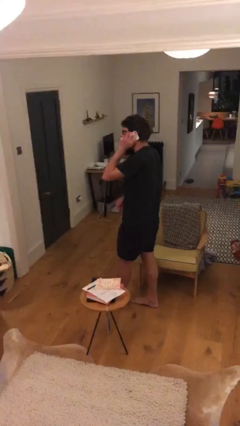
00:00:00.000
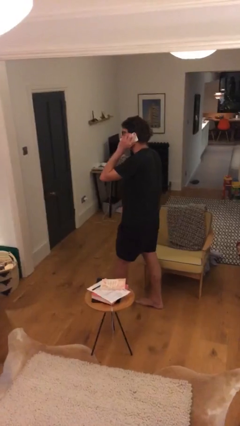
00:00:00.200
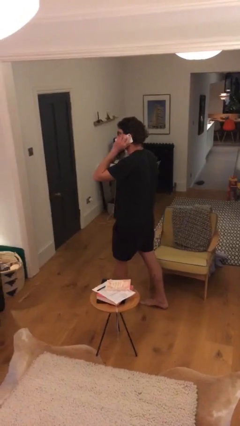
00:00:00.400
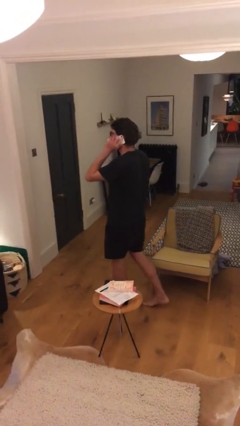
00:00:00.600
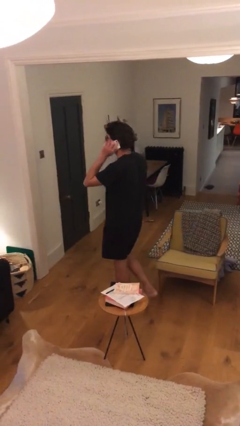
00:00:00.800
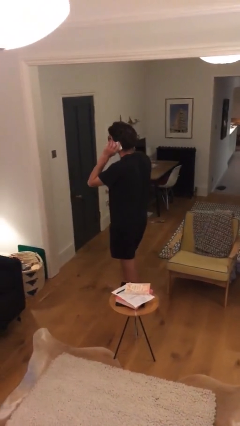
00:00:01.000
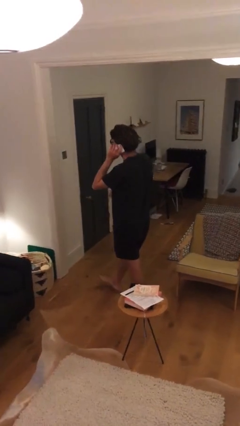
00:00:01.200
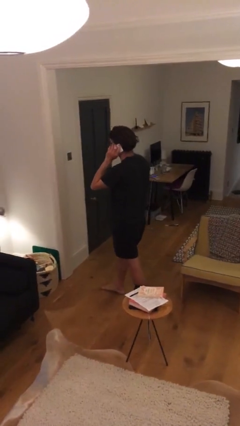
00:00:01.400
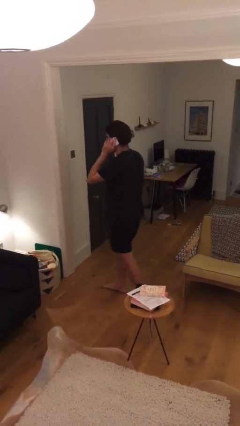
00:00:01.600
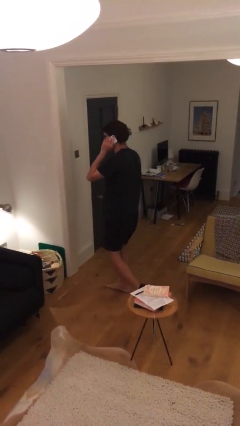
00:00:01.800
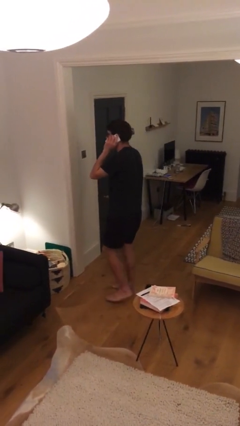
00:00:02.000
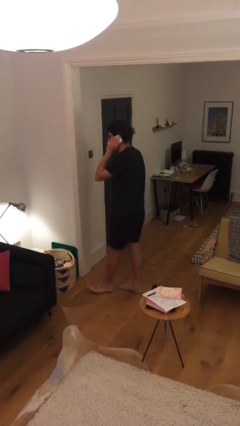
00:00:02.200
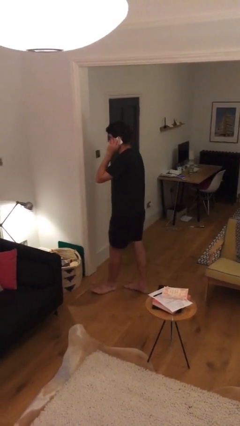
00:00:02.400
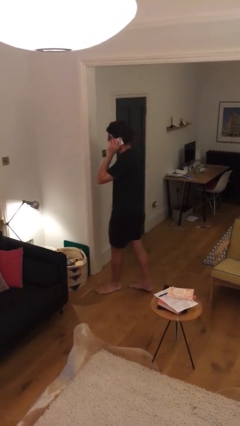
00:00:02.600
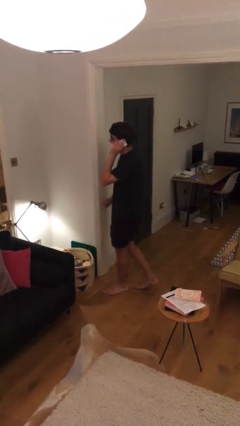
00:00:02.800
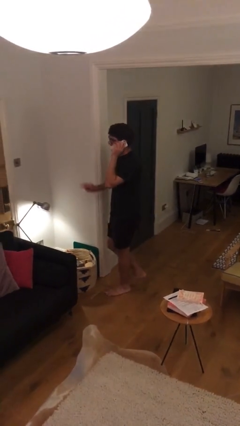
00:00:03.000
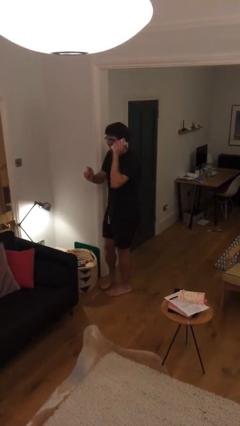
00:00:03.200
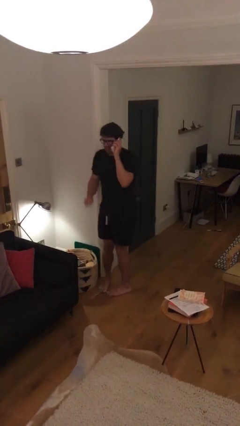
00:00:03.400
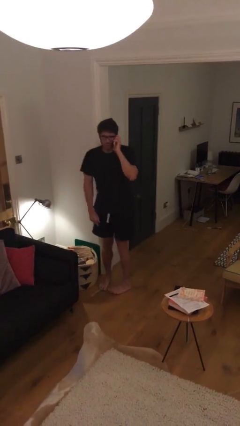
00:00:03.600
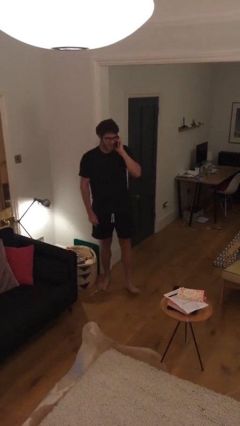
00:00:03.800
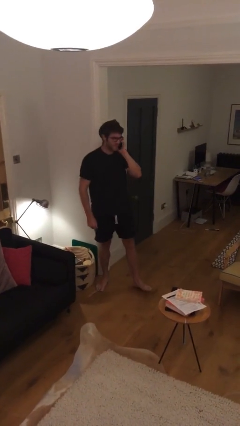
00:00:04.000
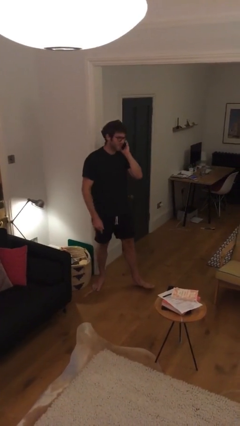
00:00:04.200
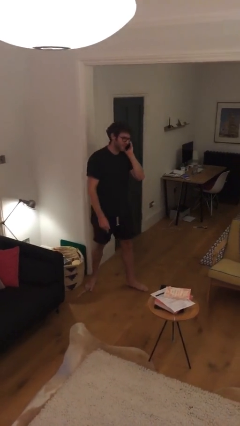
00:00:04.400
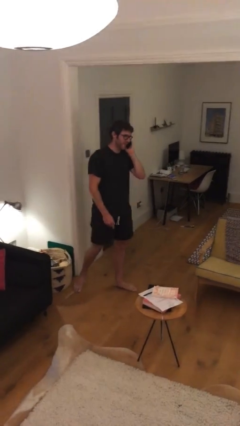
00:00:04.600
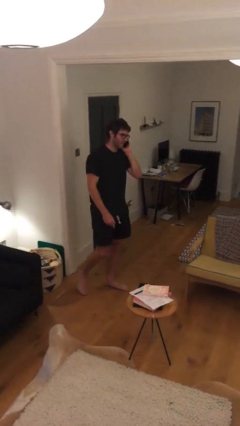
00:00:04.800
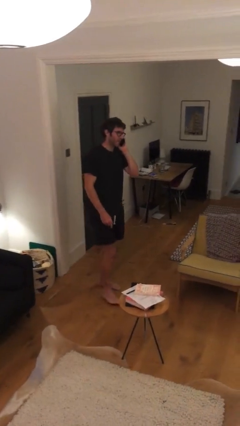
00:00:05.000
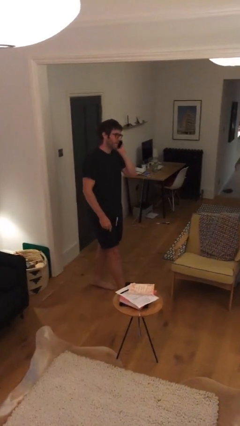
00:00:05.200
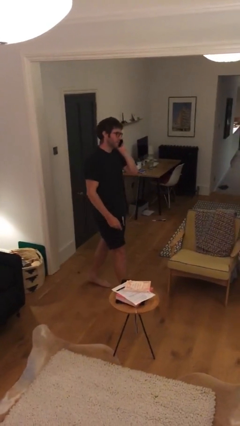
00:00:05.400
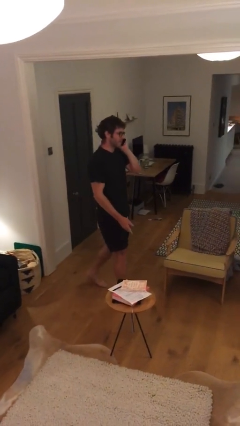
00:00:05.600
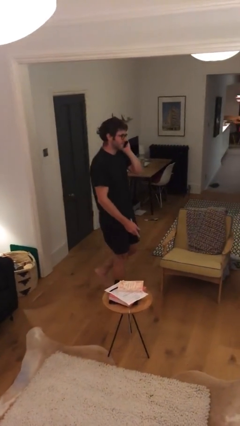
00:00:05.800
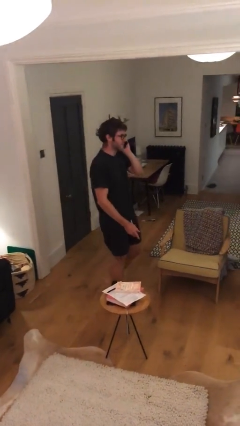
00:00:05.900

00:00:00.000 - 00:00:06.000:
person talks on phone

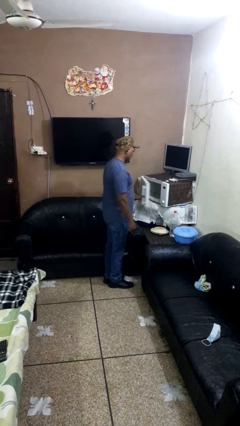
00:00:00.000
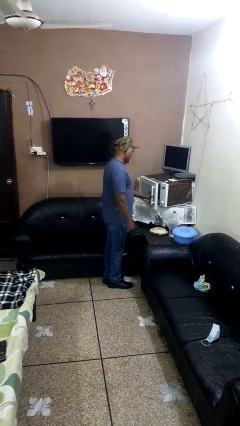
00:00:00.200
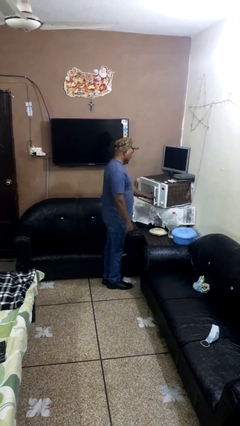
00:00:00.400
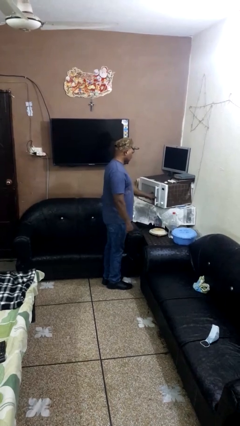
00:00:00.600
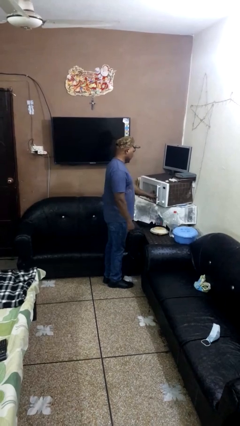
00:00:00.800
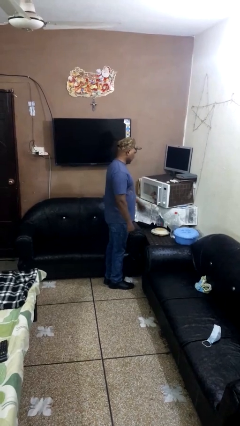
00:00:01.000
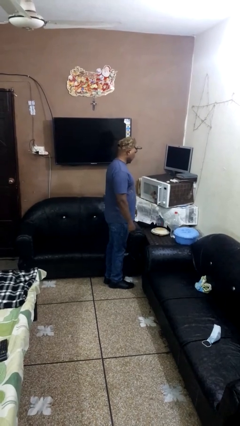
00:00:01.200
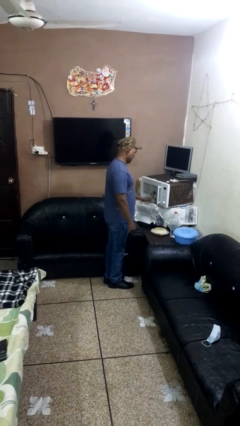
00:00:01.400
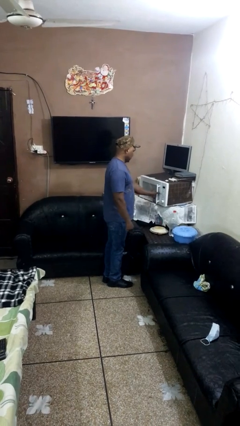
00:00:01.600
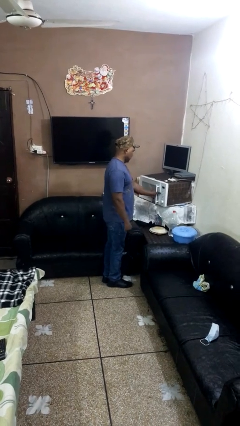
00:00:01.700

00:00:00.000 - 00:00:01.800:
person closes oven door

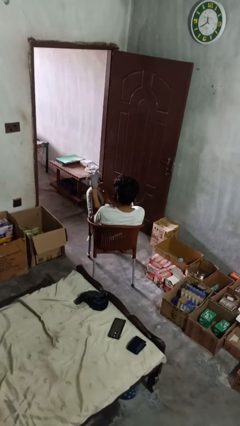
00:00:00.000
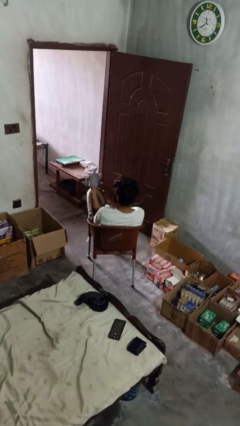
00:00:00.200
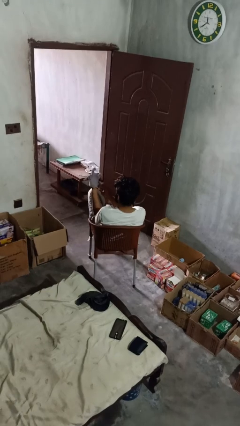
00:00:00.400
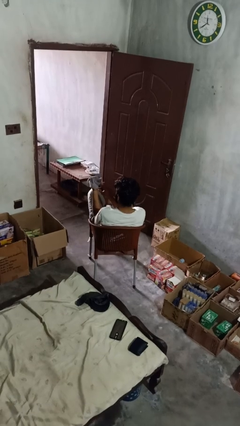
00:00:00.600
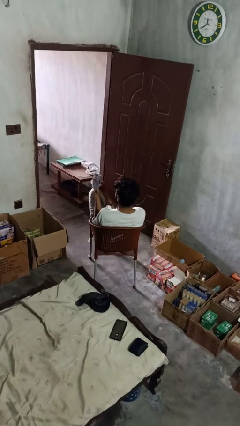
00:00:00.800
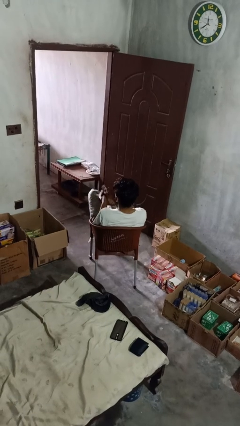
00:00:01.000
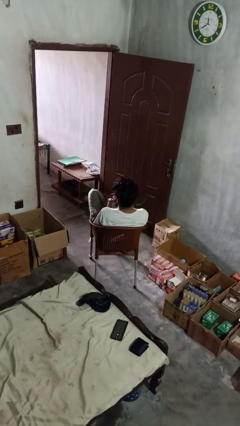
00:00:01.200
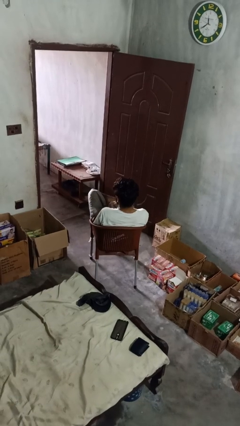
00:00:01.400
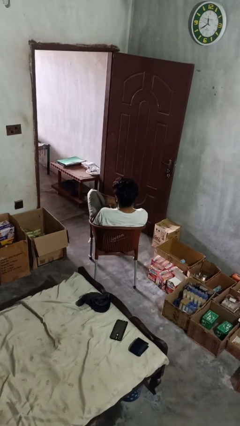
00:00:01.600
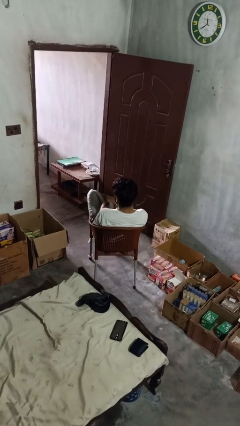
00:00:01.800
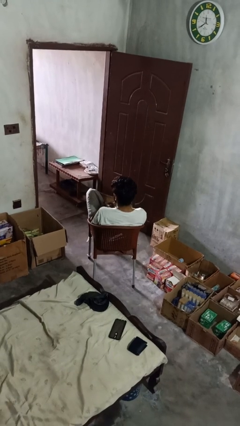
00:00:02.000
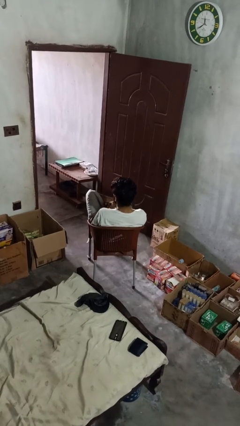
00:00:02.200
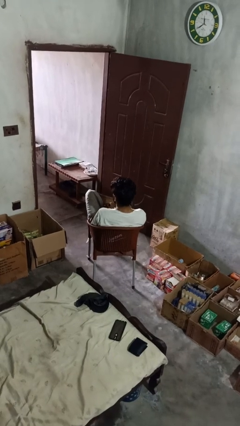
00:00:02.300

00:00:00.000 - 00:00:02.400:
person takes off gloves

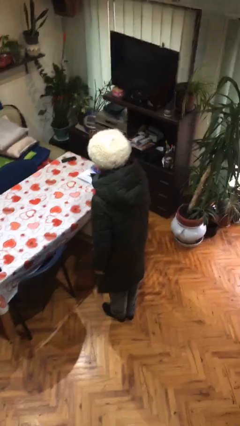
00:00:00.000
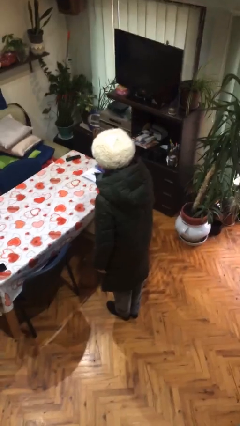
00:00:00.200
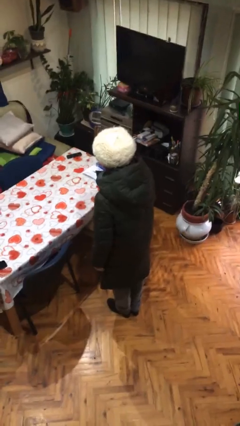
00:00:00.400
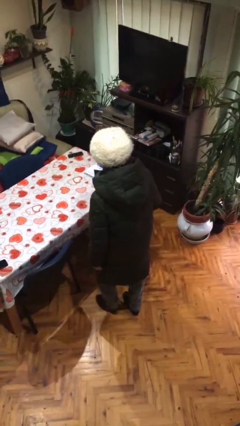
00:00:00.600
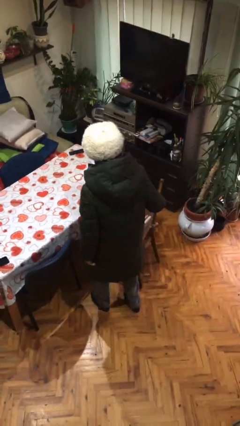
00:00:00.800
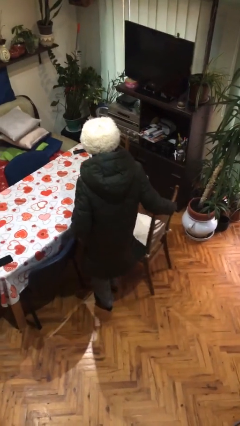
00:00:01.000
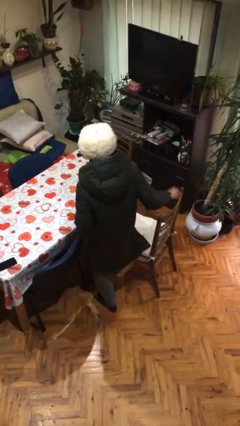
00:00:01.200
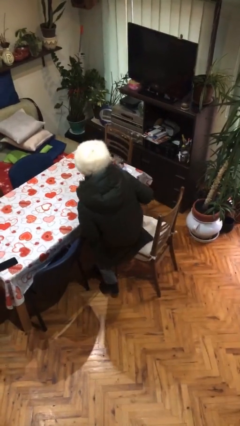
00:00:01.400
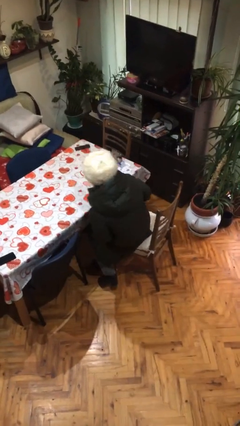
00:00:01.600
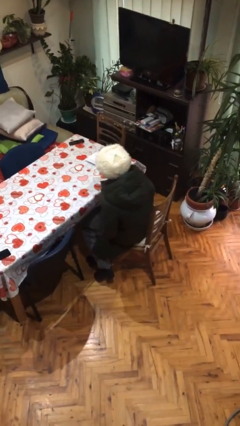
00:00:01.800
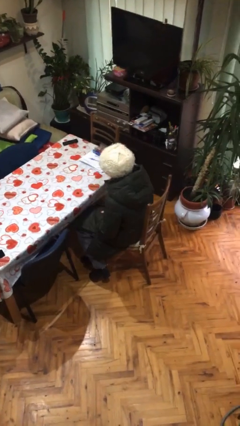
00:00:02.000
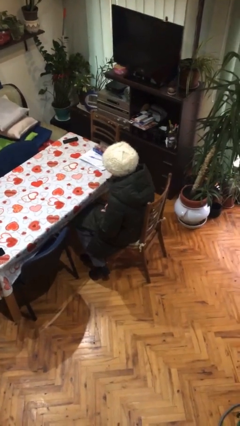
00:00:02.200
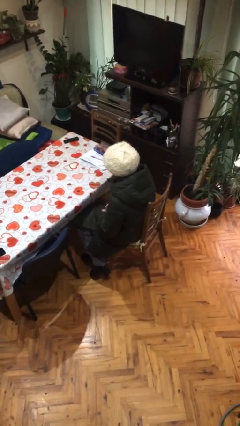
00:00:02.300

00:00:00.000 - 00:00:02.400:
person sits down

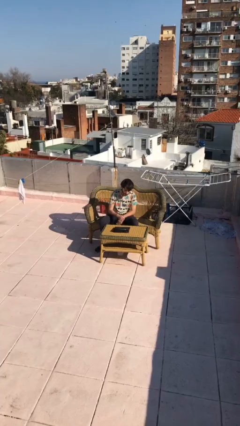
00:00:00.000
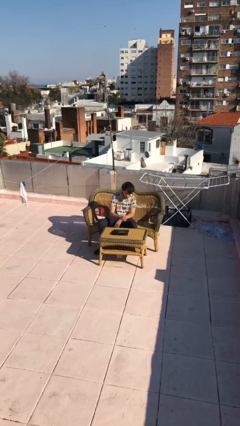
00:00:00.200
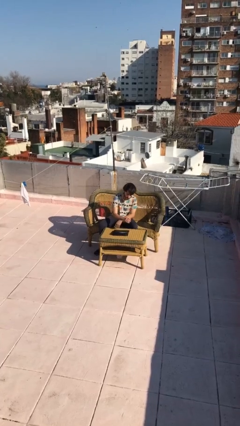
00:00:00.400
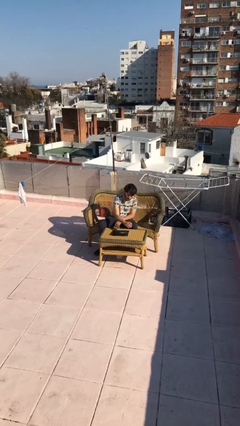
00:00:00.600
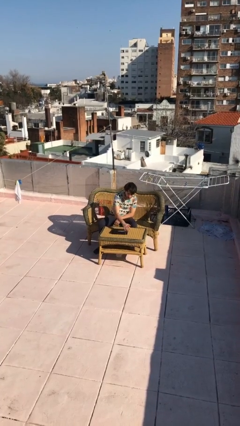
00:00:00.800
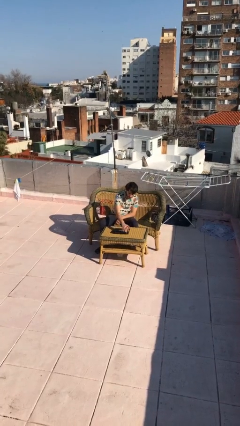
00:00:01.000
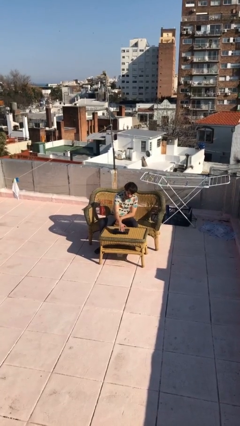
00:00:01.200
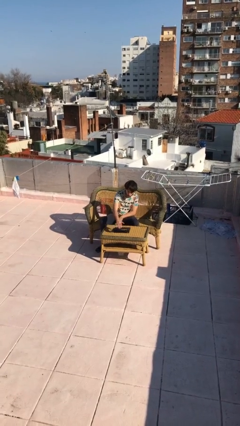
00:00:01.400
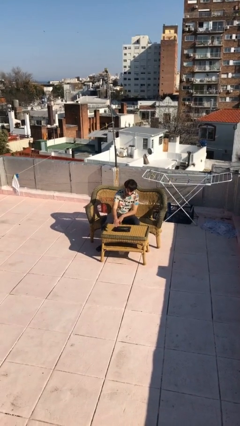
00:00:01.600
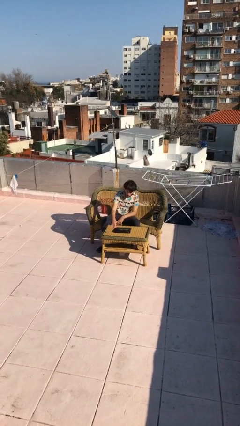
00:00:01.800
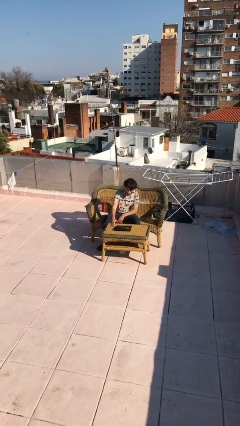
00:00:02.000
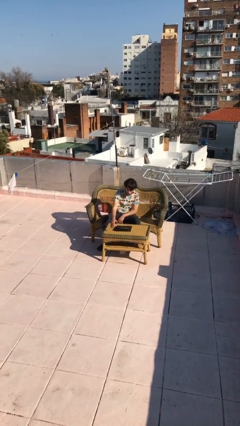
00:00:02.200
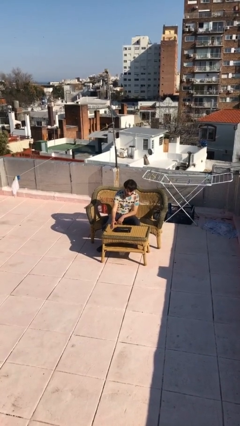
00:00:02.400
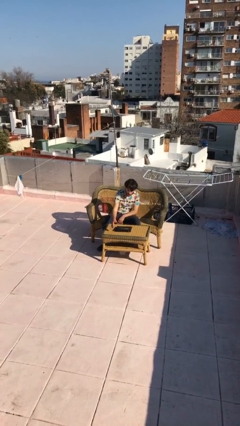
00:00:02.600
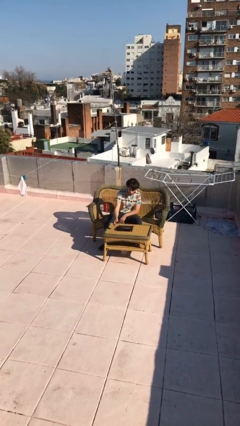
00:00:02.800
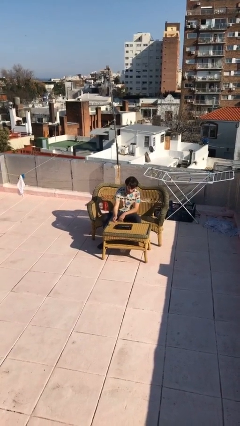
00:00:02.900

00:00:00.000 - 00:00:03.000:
person waves hand over object

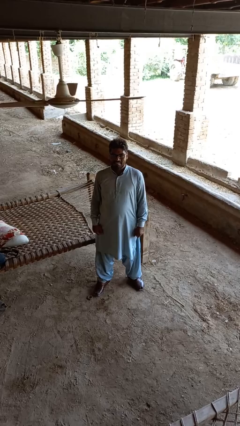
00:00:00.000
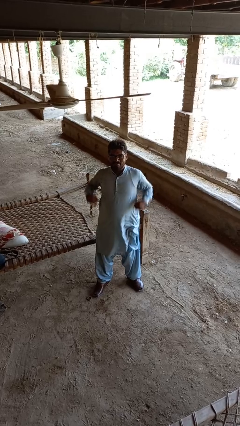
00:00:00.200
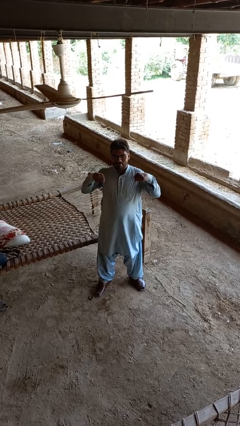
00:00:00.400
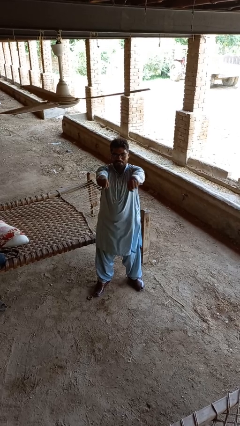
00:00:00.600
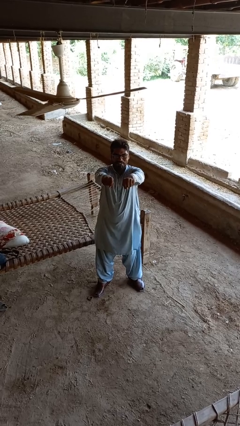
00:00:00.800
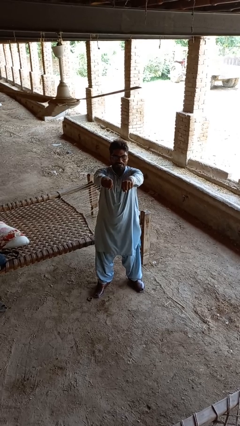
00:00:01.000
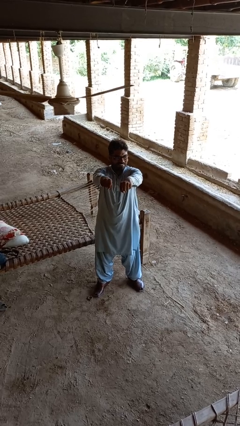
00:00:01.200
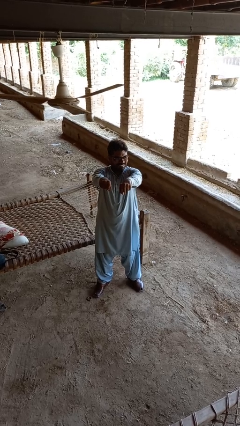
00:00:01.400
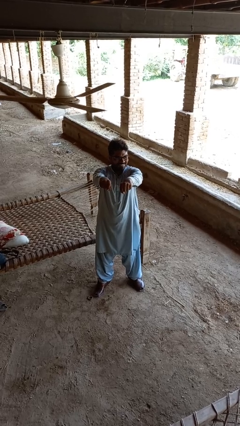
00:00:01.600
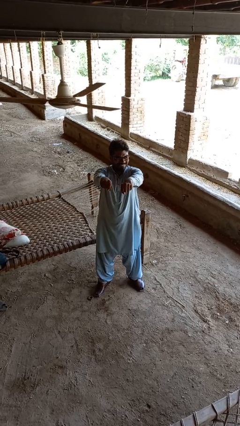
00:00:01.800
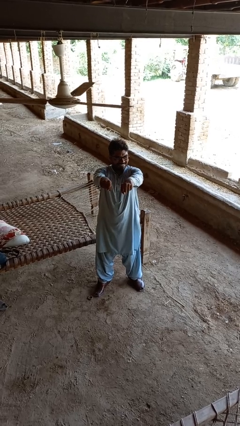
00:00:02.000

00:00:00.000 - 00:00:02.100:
person punches
